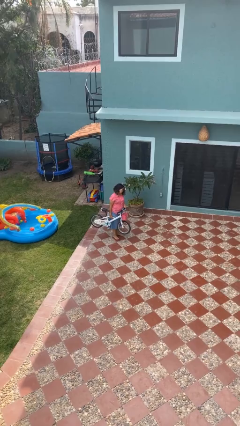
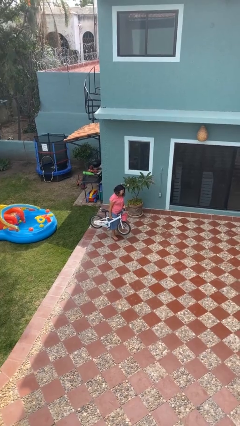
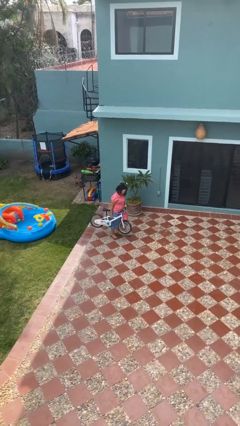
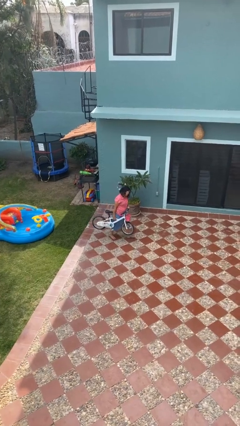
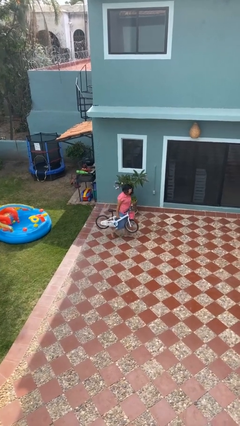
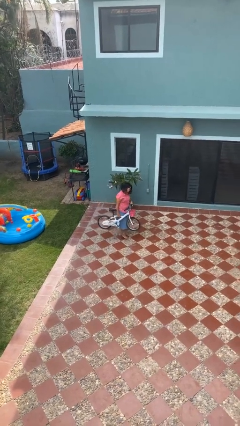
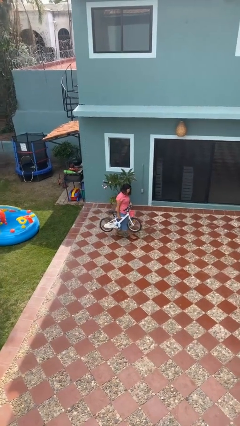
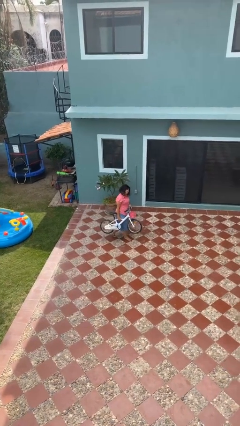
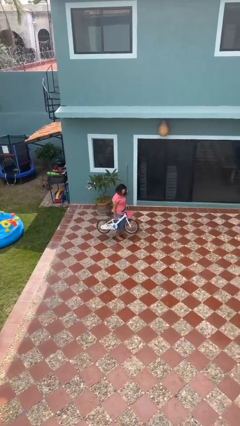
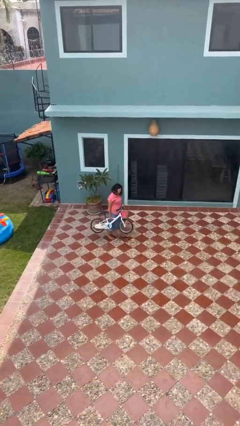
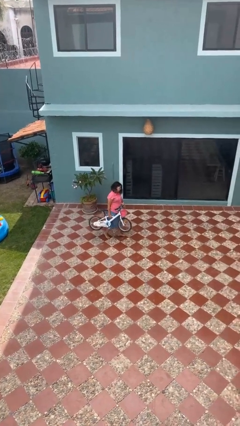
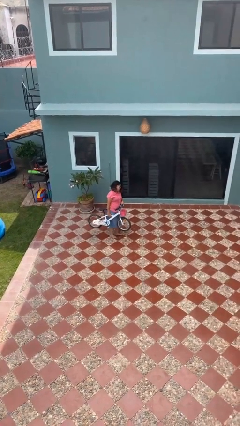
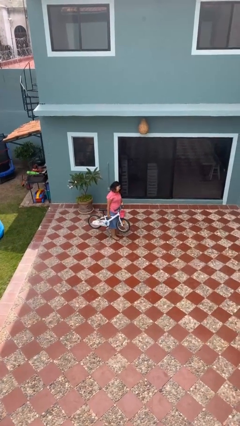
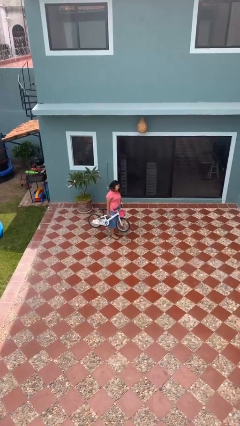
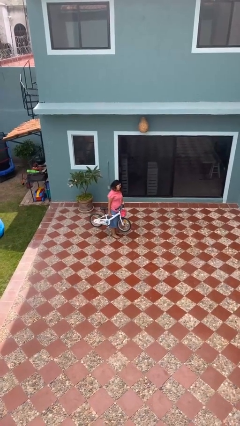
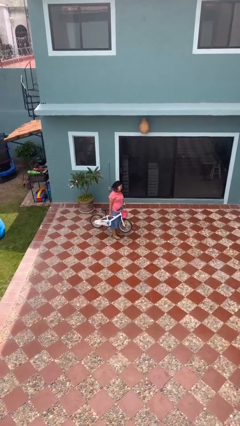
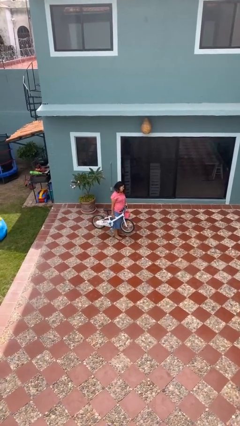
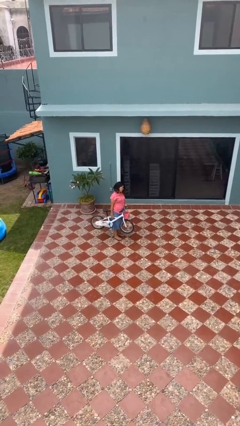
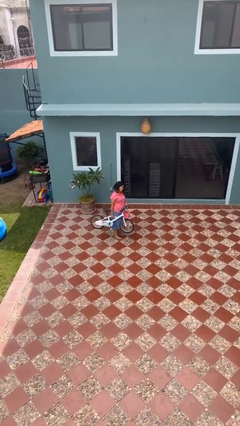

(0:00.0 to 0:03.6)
person carries bicycle

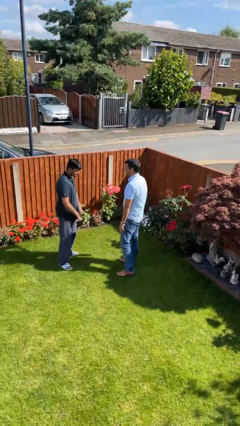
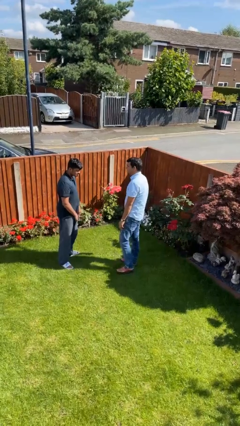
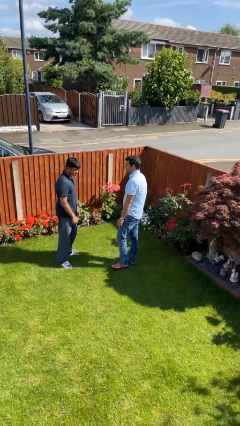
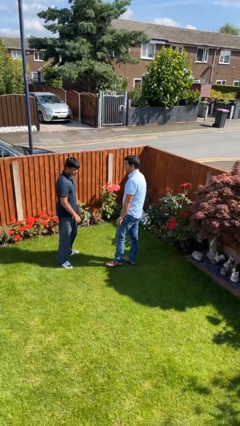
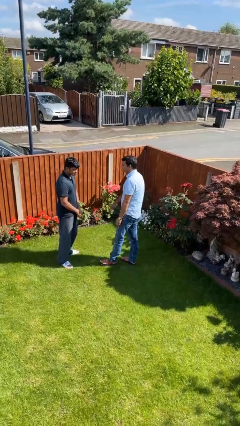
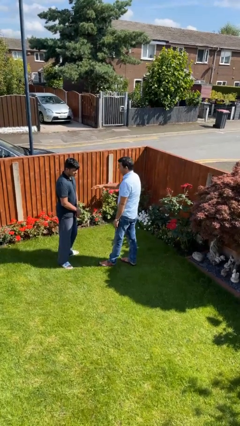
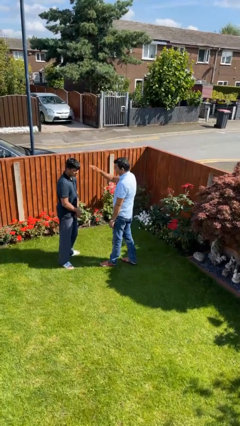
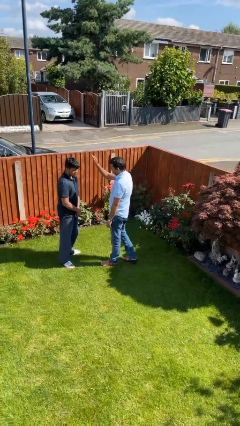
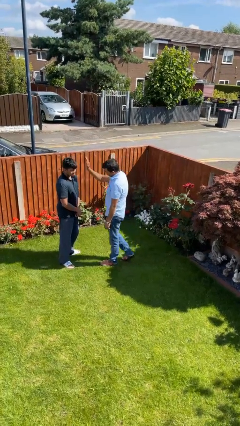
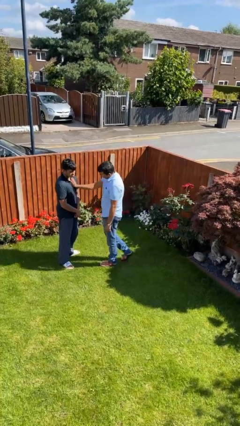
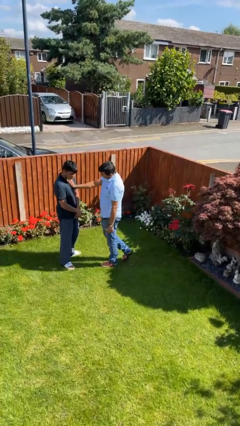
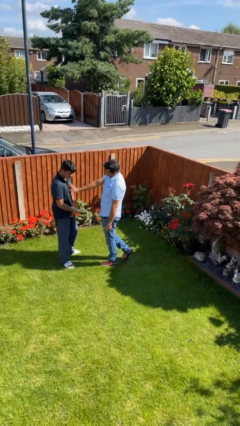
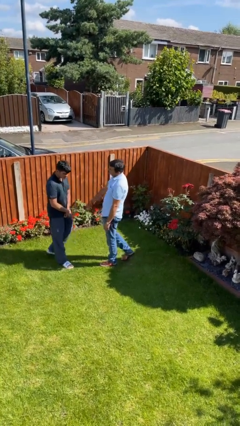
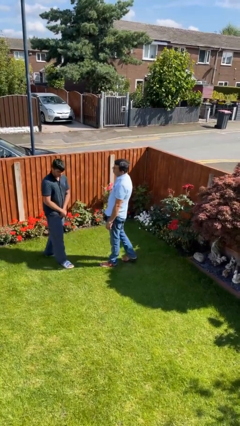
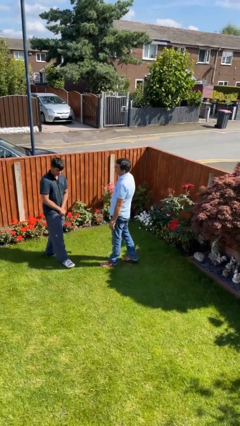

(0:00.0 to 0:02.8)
person shoves person

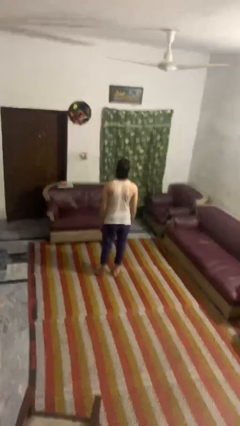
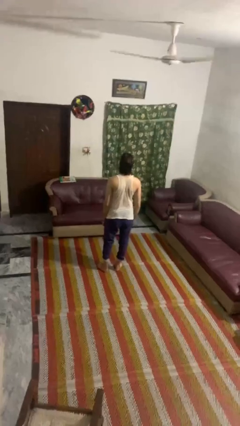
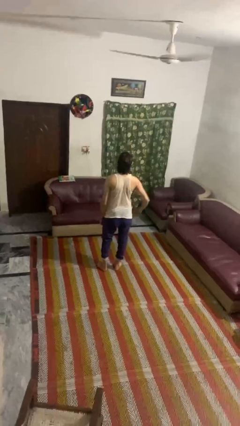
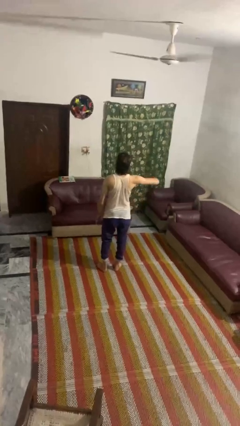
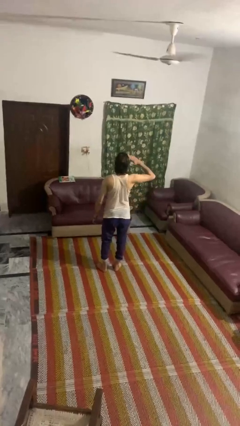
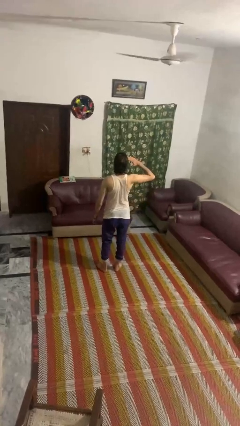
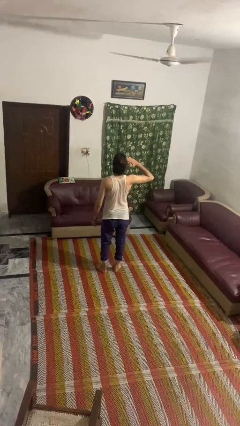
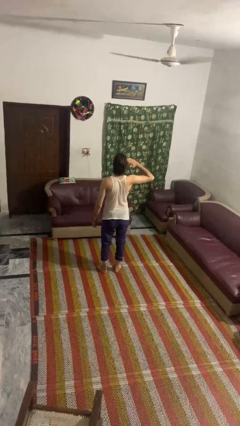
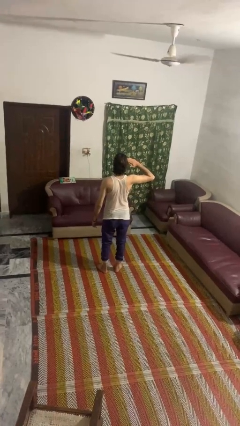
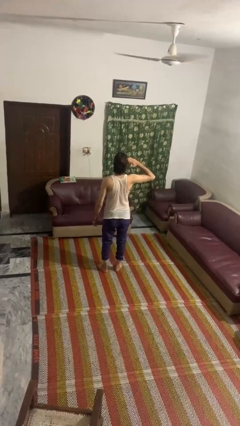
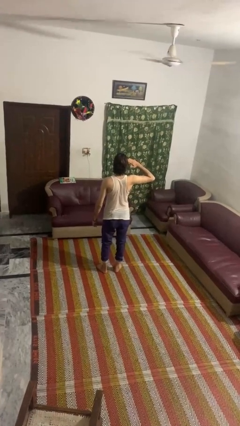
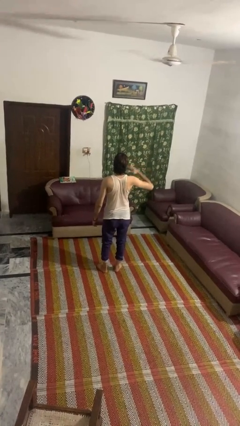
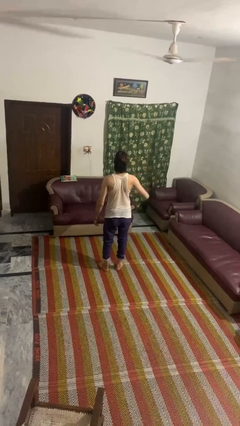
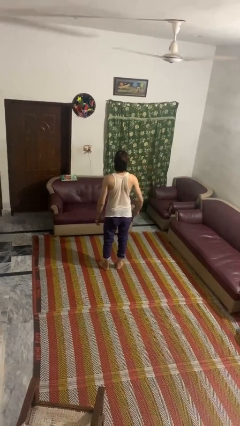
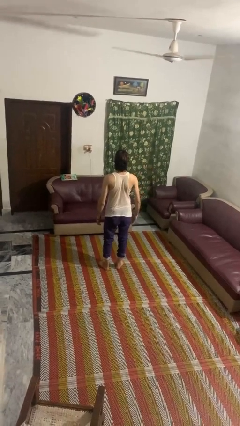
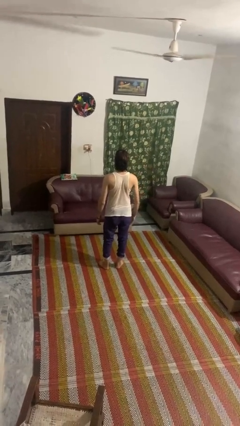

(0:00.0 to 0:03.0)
person salutes

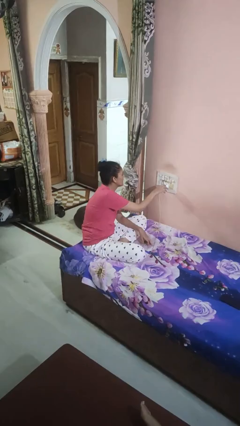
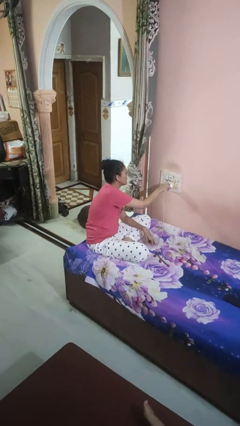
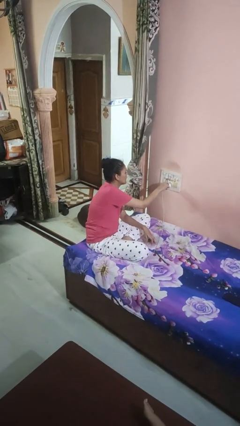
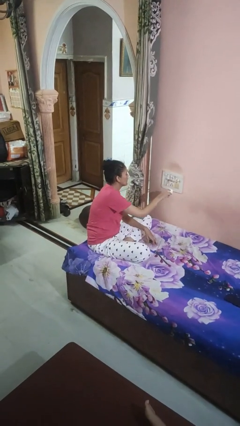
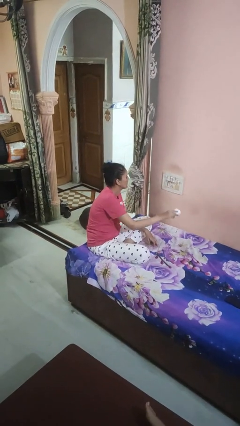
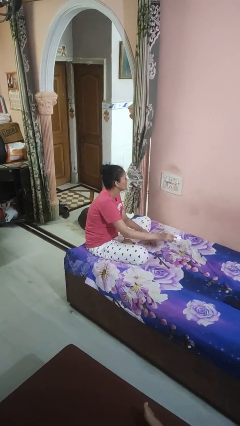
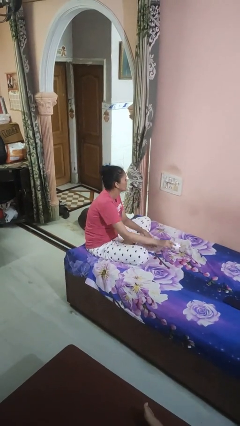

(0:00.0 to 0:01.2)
person unplugs from electrical socket

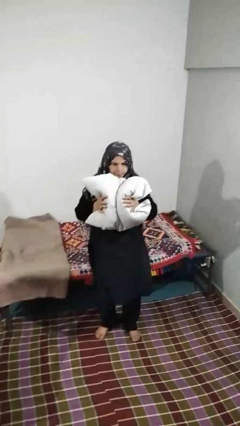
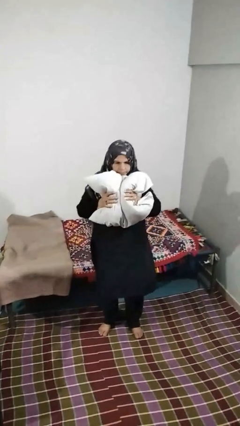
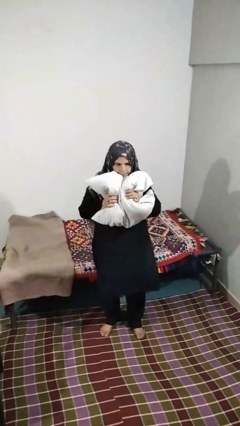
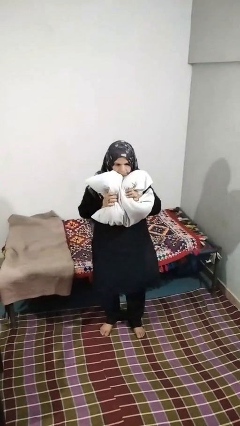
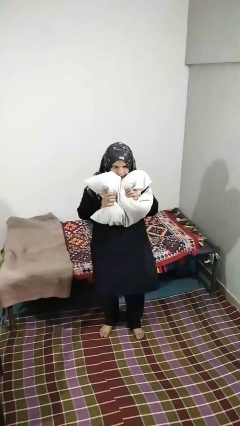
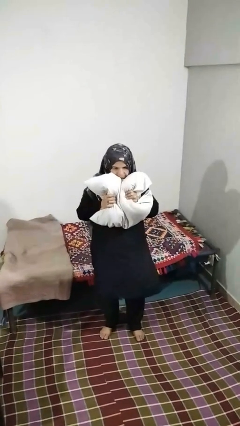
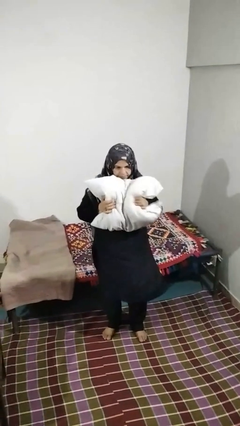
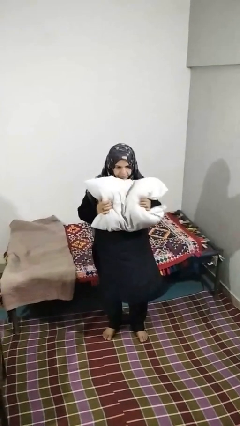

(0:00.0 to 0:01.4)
person squeezes object

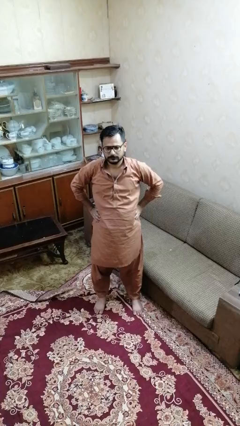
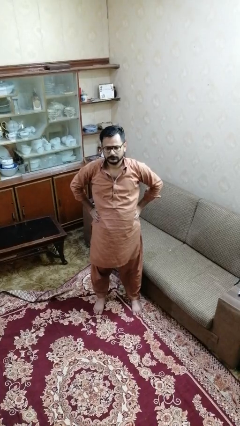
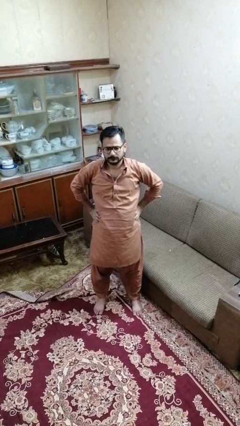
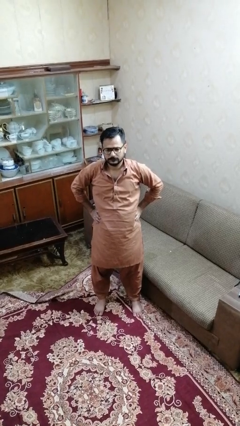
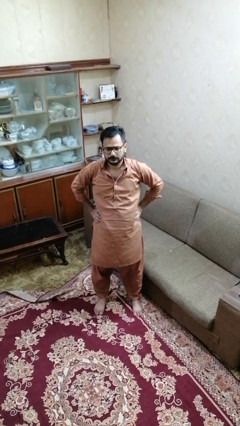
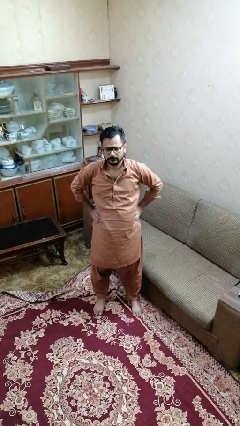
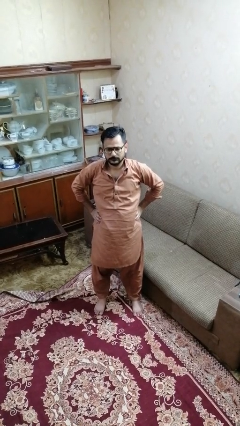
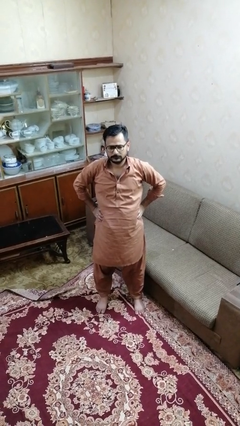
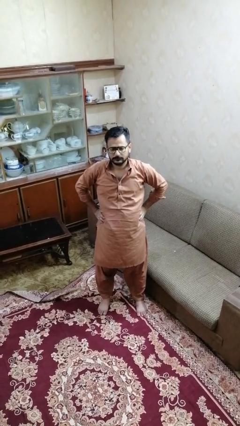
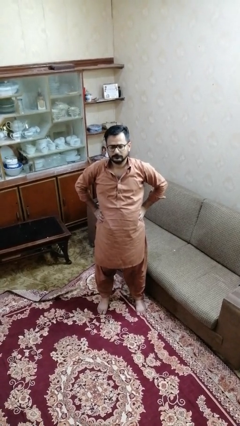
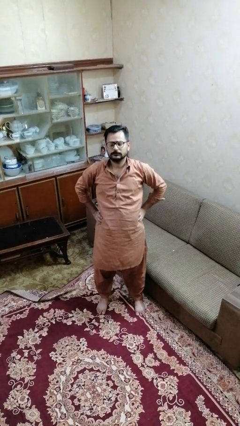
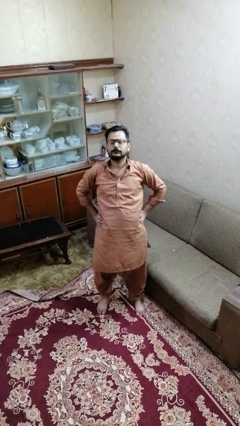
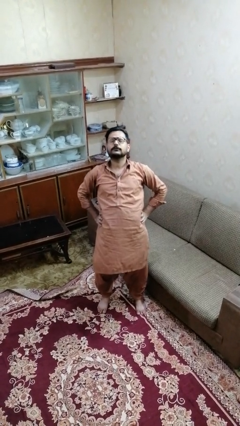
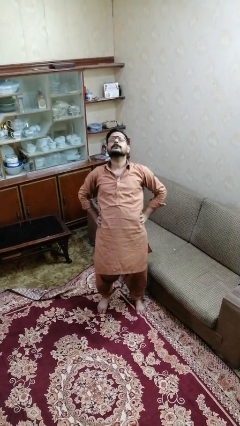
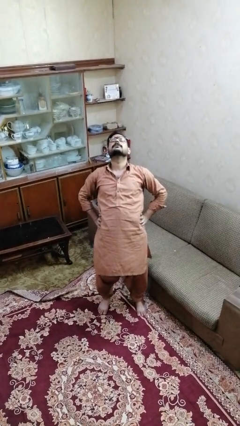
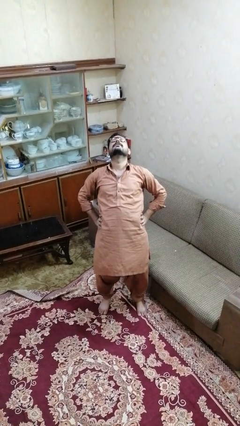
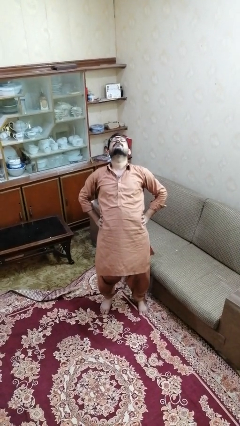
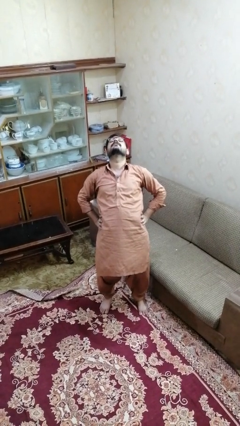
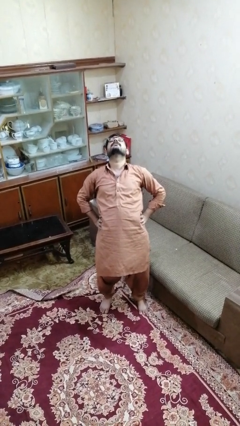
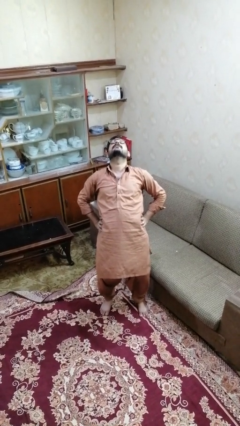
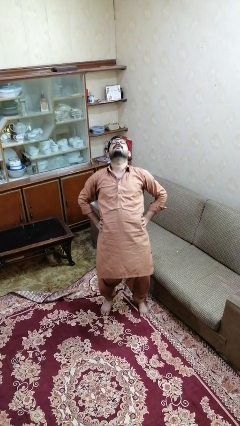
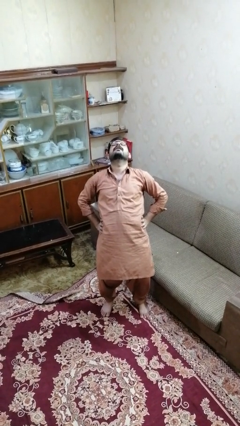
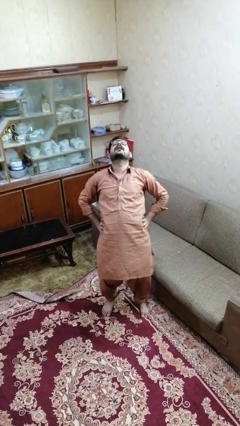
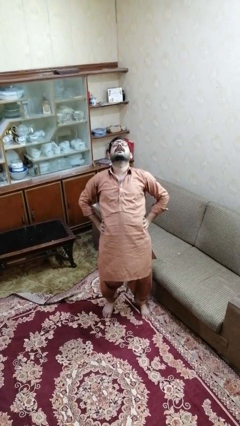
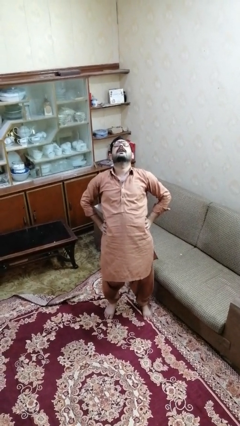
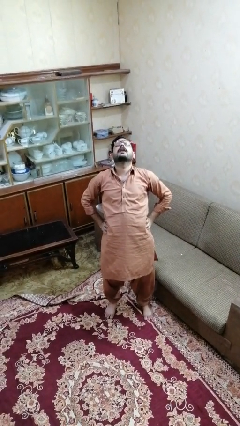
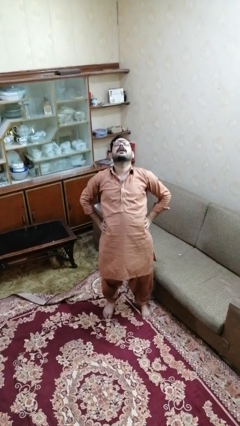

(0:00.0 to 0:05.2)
person stretches back

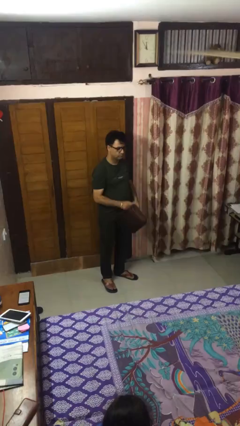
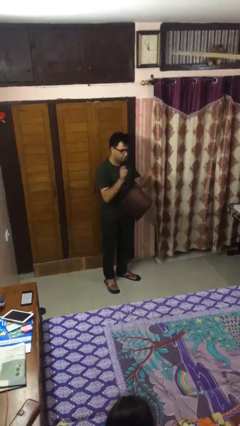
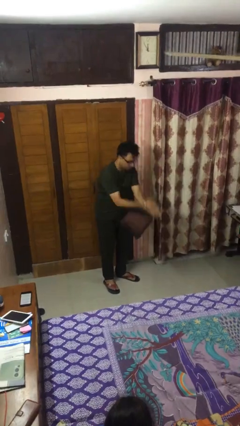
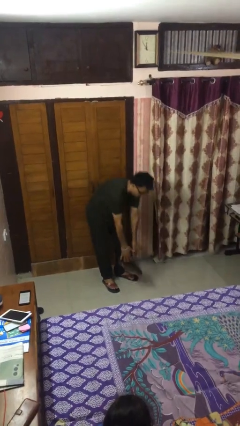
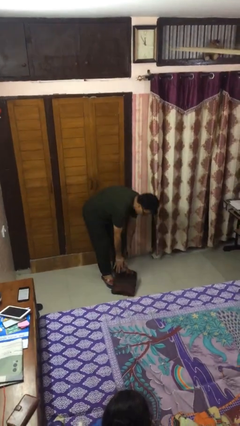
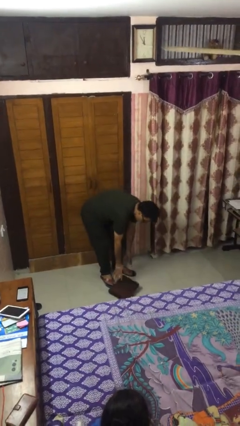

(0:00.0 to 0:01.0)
person drops object
